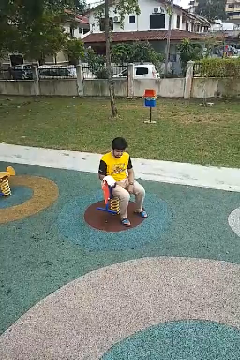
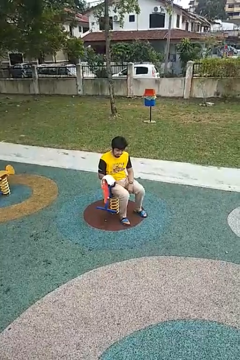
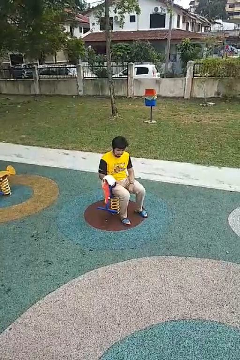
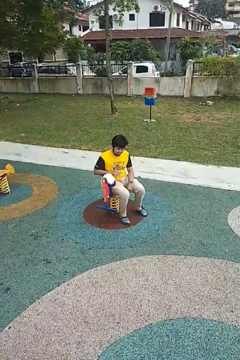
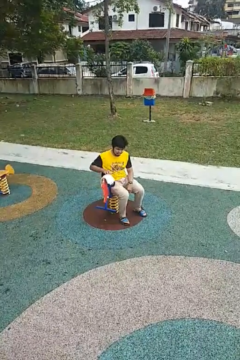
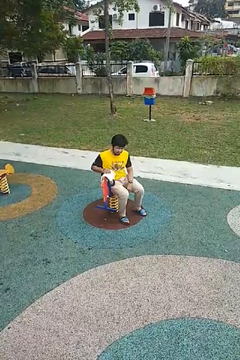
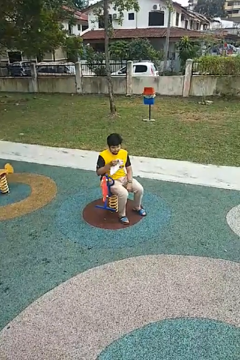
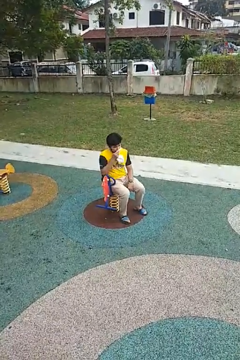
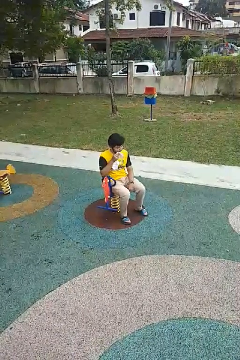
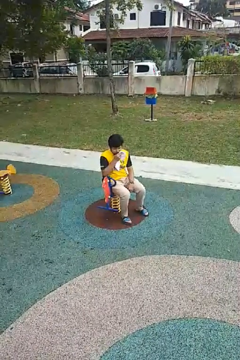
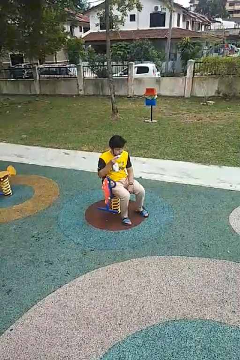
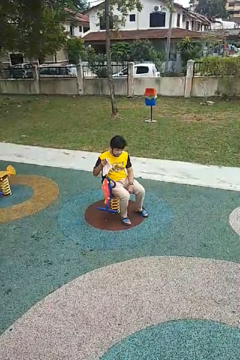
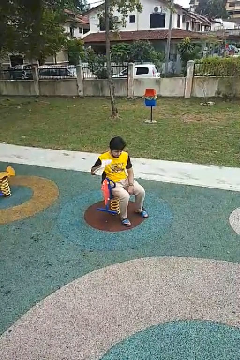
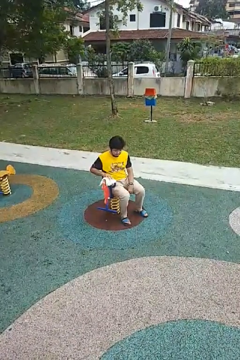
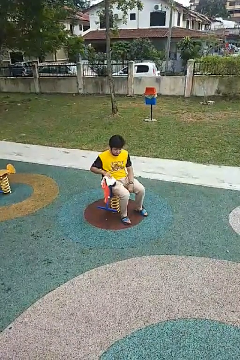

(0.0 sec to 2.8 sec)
person wipes mouth with napkin

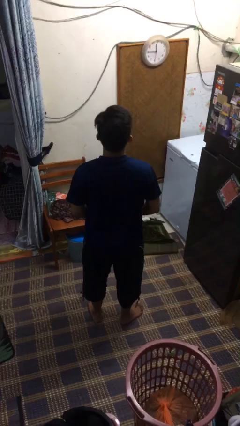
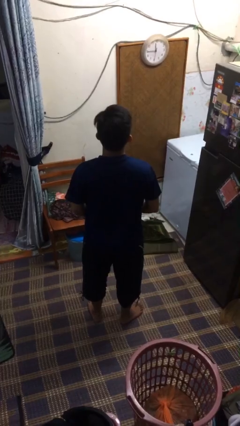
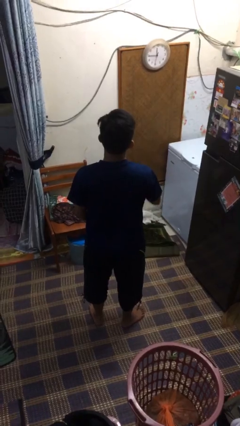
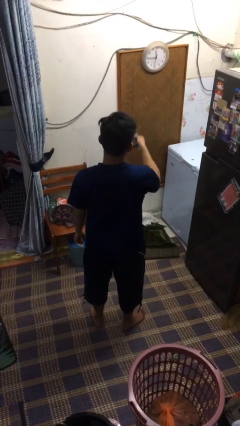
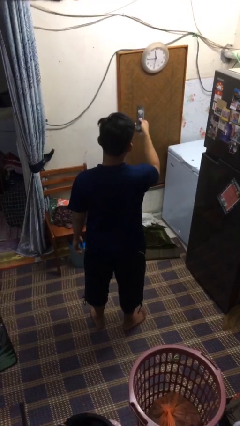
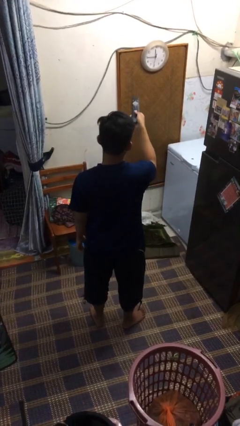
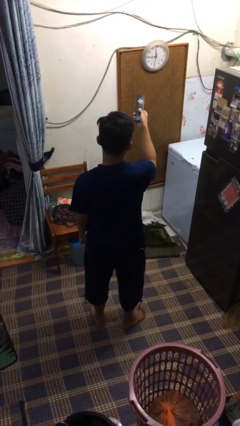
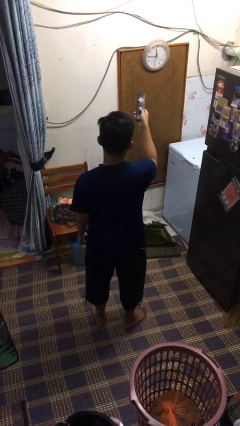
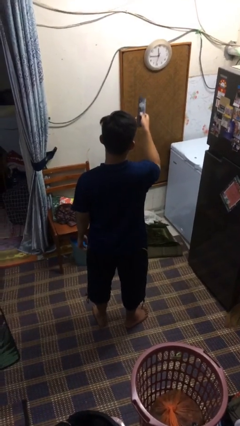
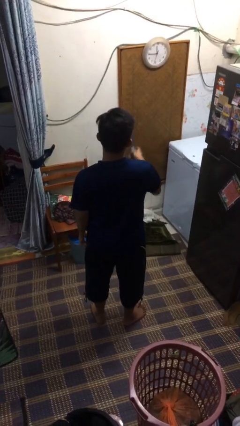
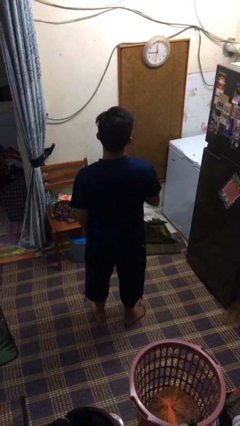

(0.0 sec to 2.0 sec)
person uses television remote

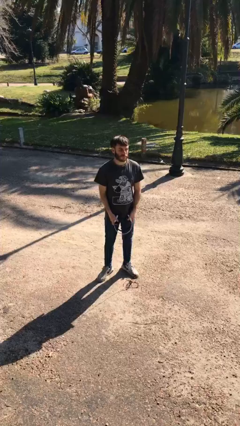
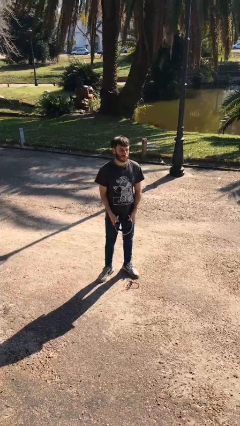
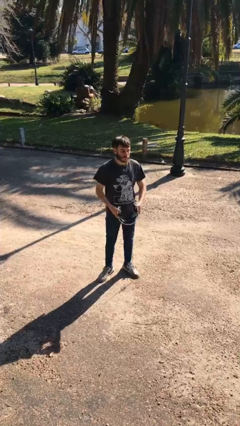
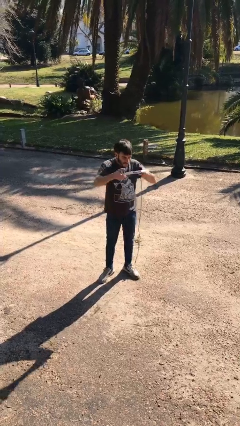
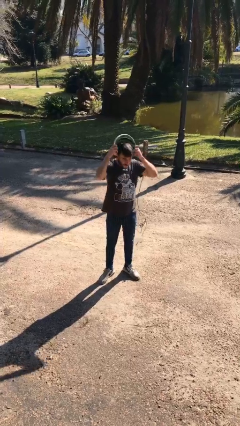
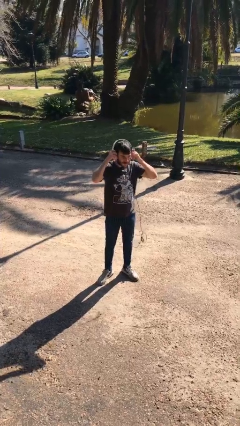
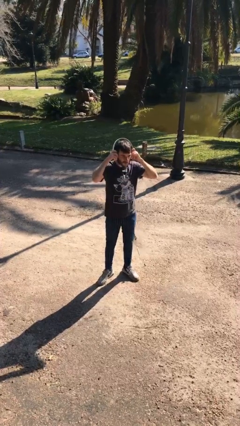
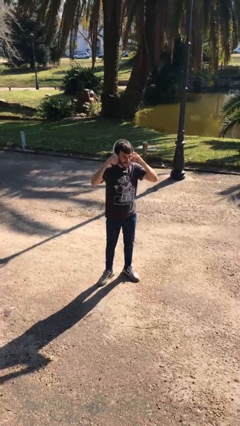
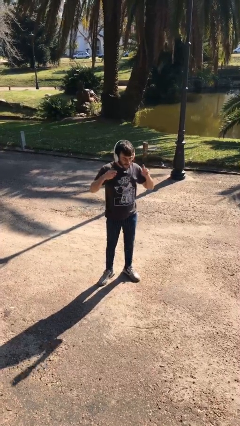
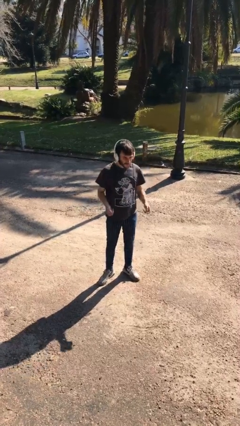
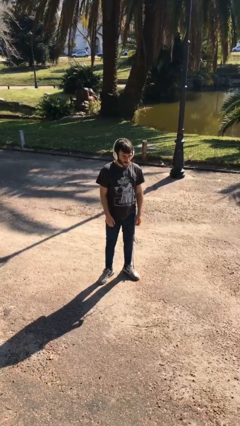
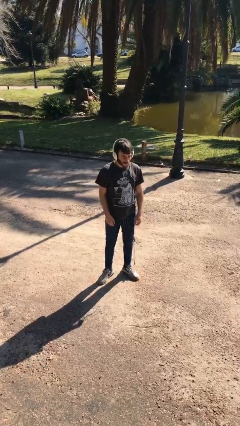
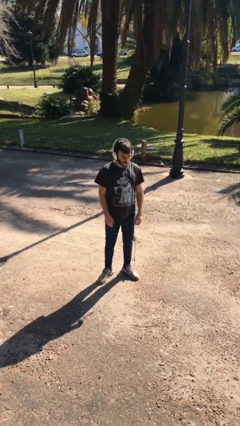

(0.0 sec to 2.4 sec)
person puts on headphones

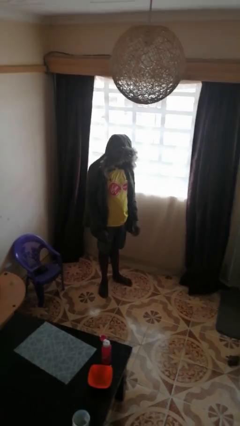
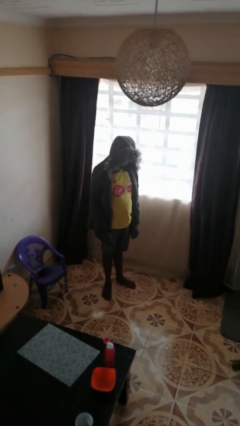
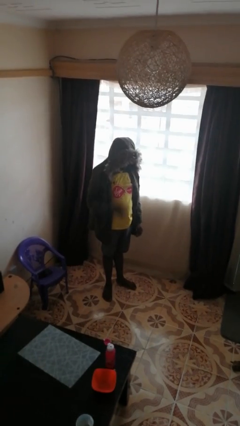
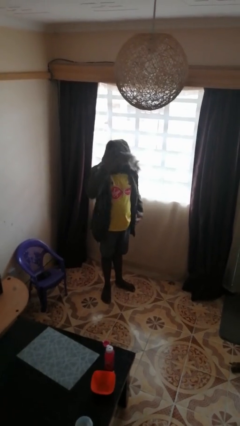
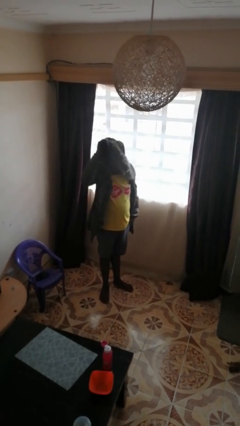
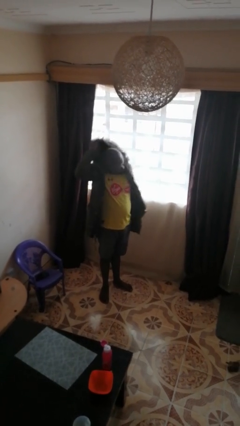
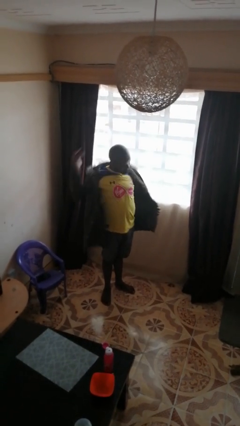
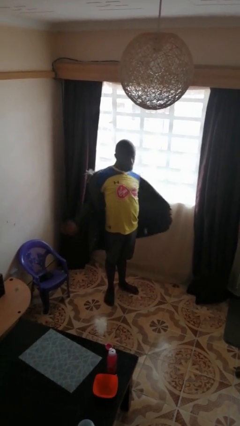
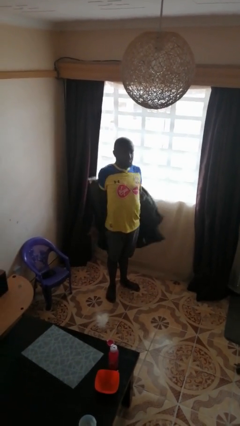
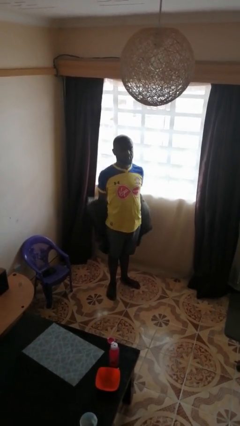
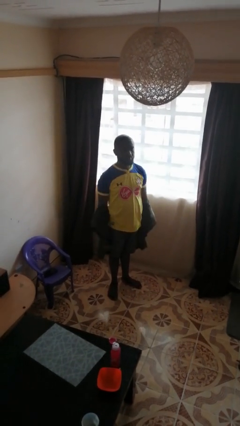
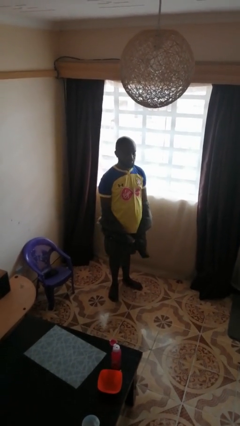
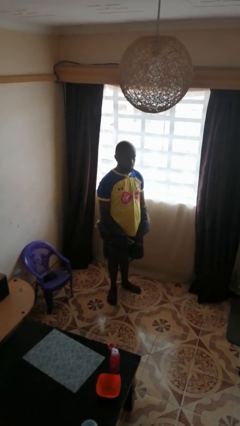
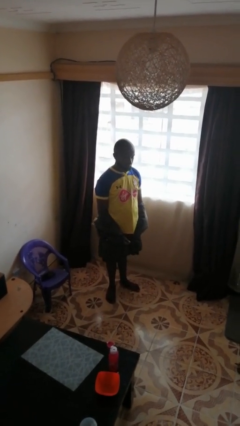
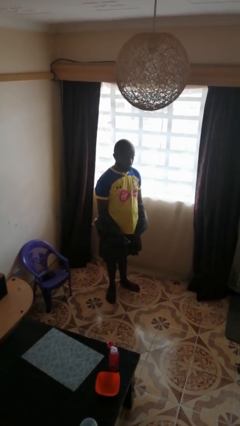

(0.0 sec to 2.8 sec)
person takes off hoodie

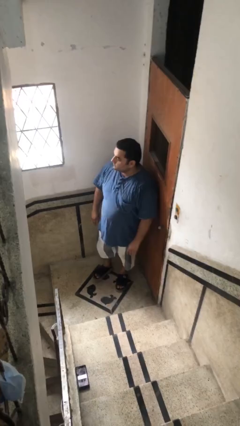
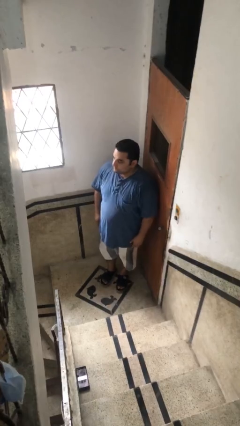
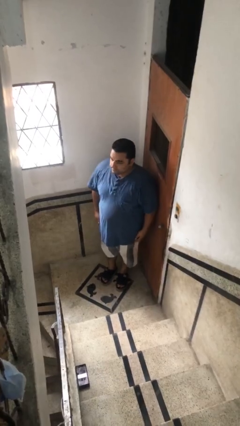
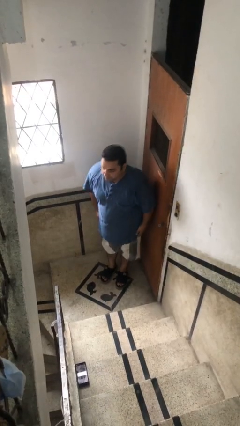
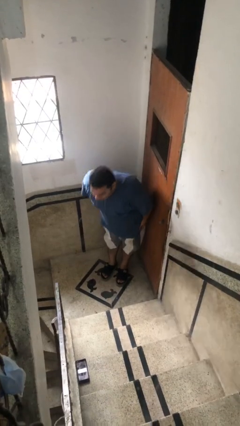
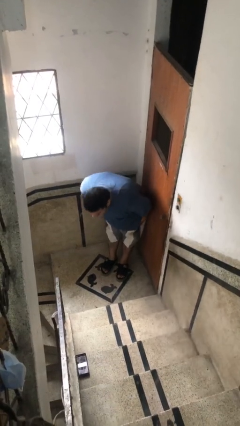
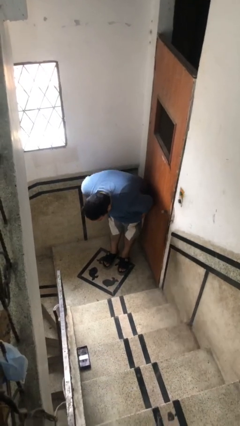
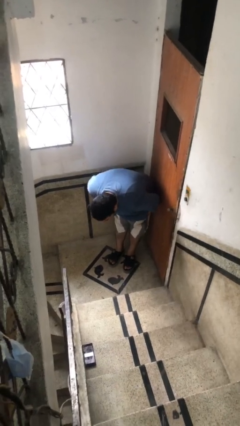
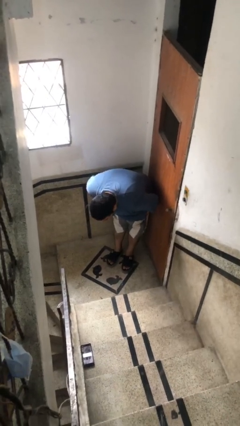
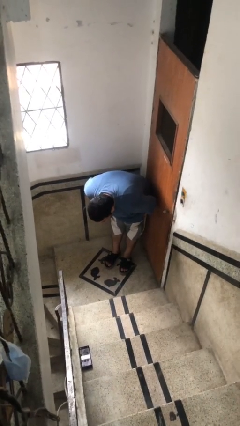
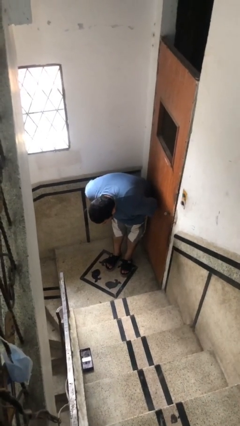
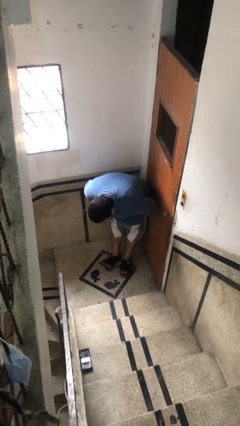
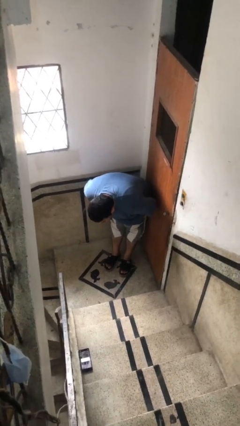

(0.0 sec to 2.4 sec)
person bows

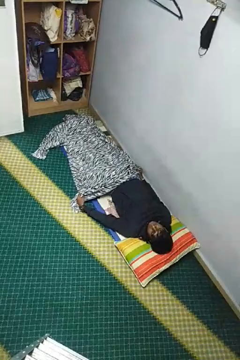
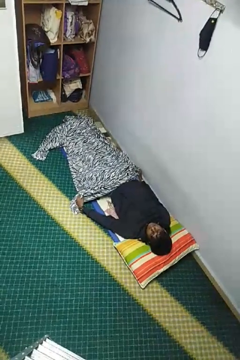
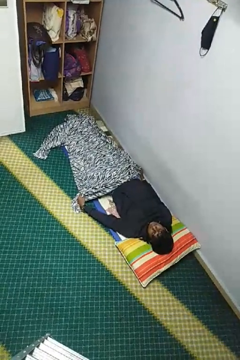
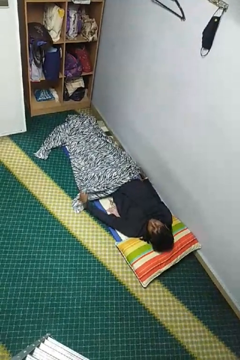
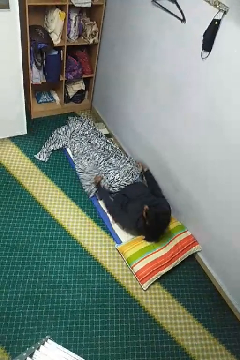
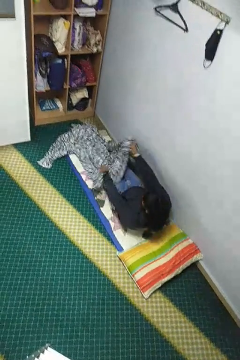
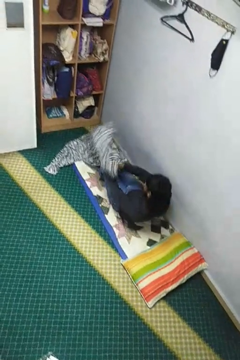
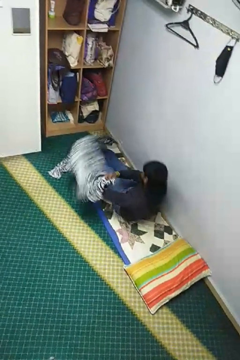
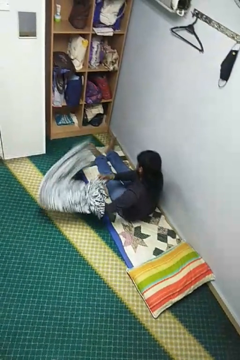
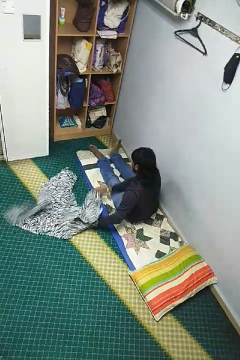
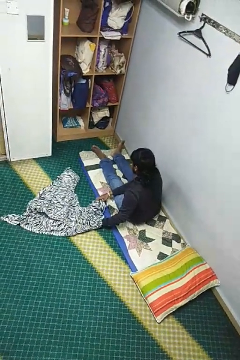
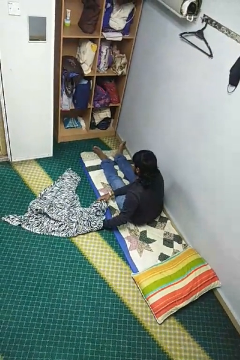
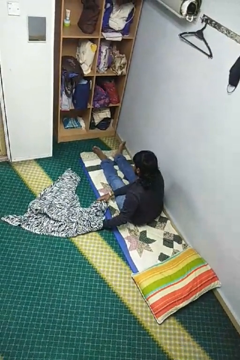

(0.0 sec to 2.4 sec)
person uncovers with blanket

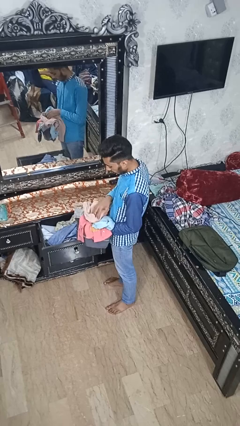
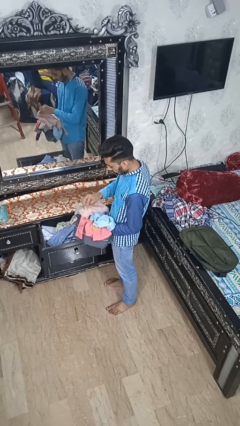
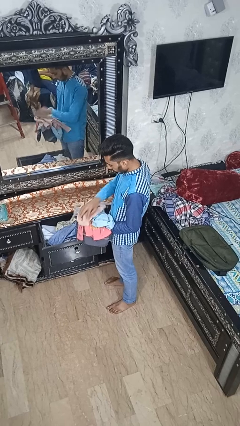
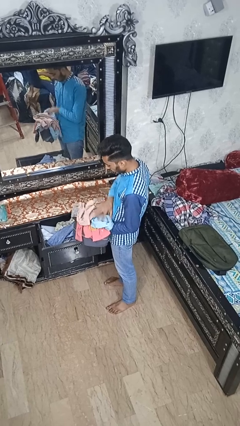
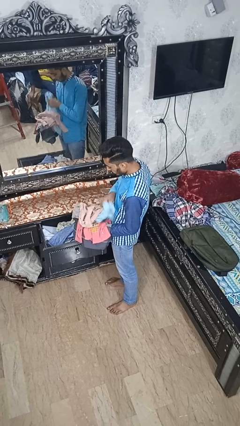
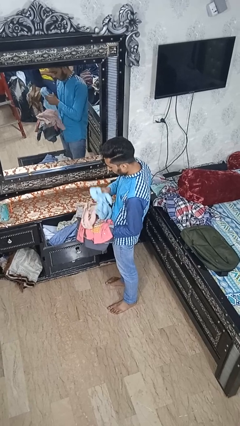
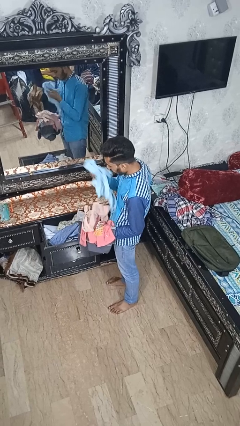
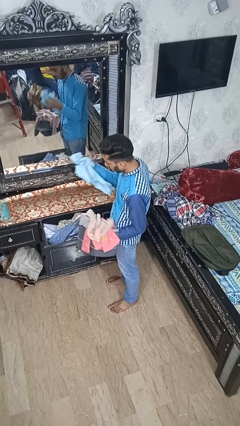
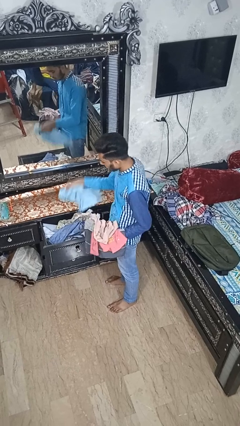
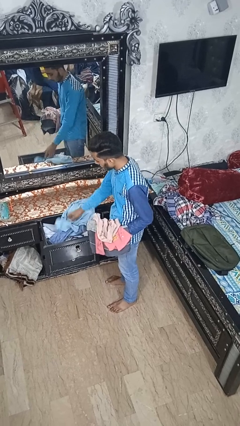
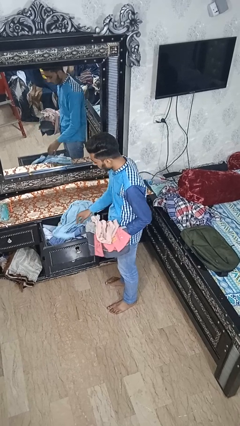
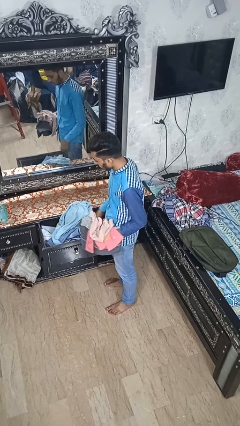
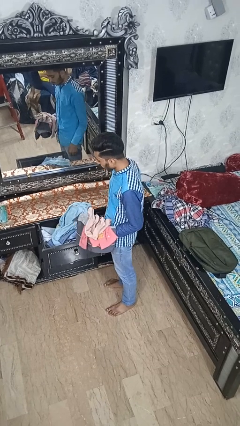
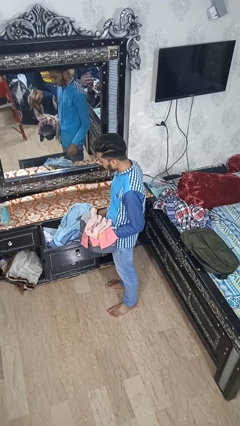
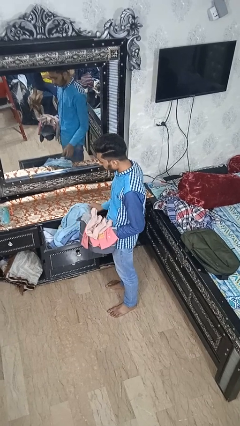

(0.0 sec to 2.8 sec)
person puts clothes into dresser
